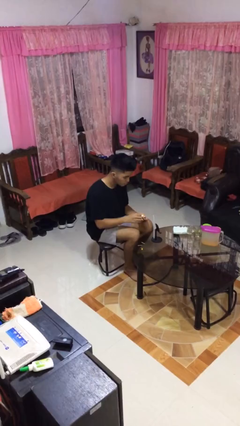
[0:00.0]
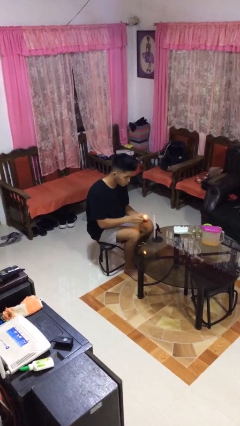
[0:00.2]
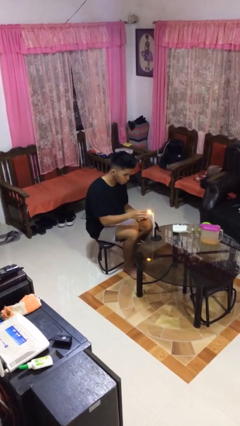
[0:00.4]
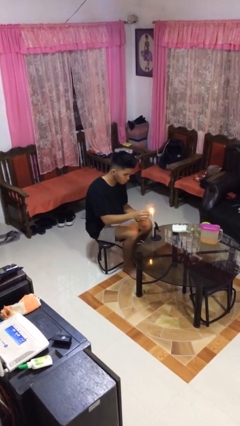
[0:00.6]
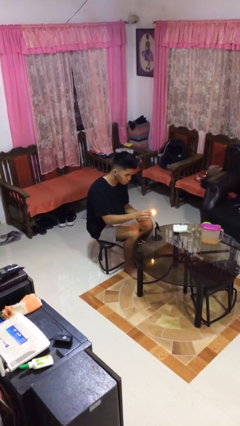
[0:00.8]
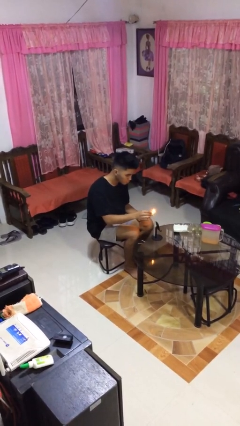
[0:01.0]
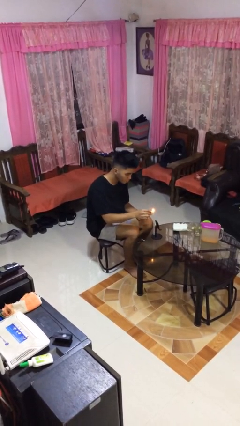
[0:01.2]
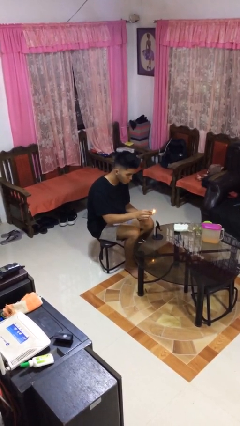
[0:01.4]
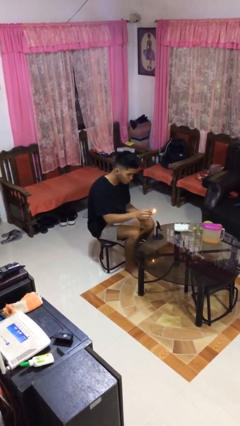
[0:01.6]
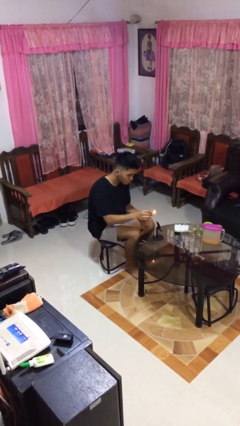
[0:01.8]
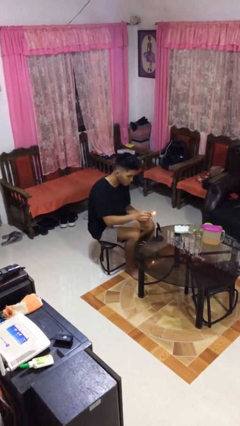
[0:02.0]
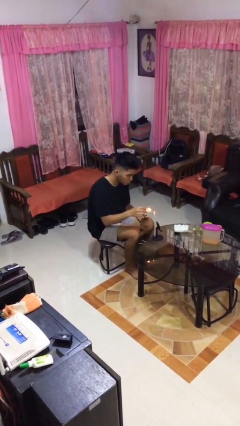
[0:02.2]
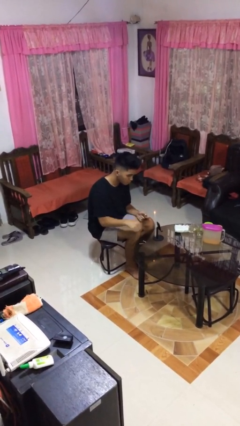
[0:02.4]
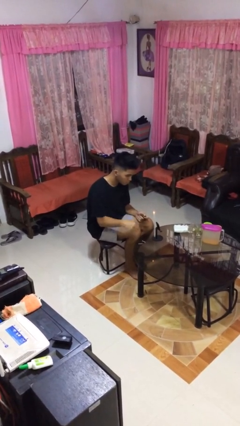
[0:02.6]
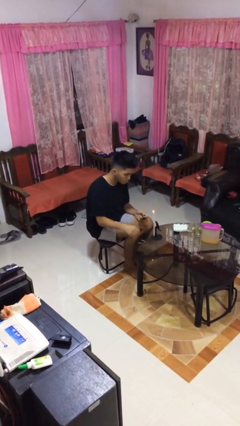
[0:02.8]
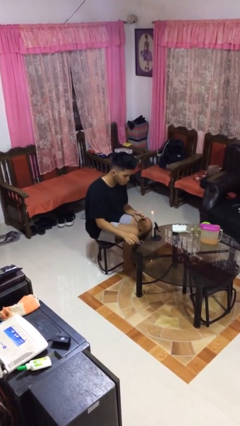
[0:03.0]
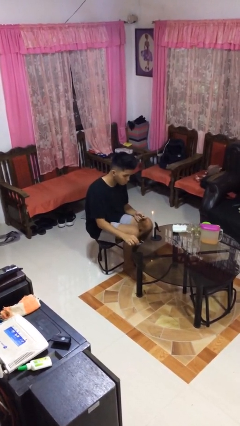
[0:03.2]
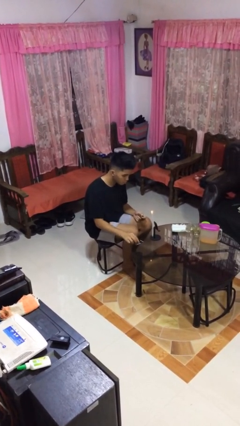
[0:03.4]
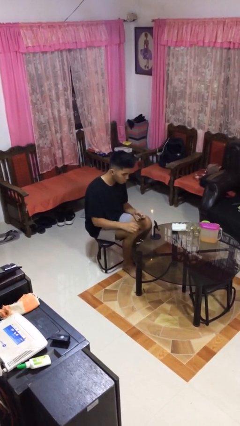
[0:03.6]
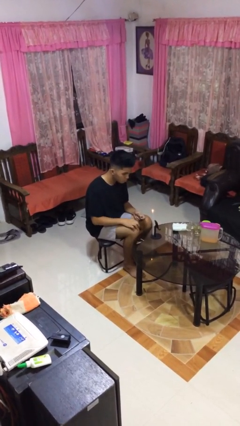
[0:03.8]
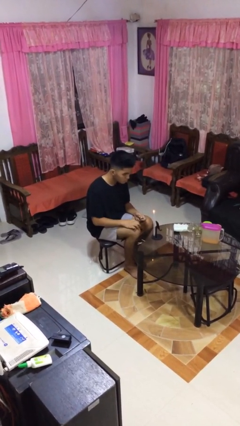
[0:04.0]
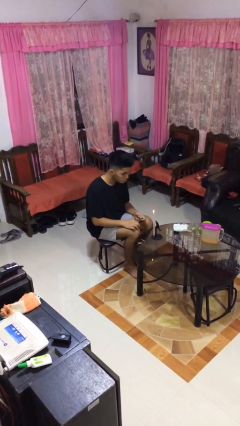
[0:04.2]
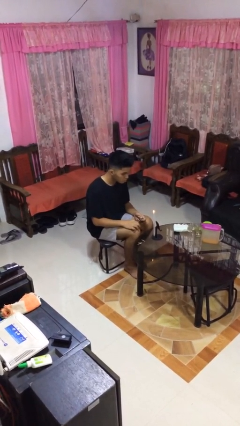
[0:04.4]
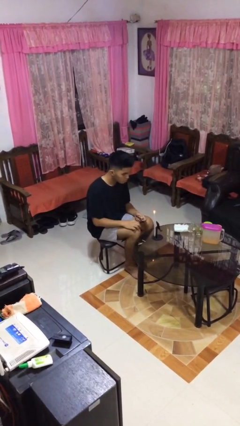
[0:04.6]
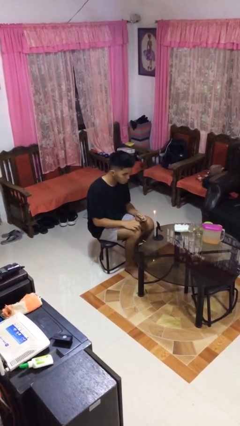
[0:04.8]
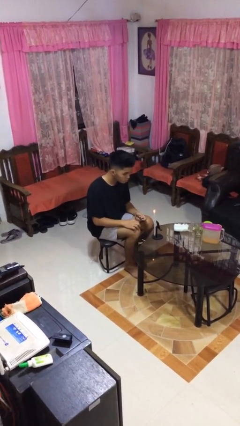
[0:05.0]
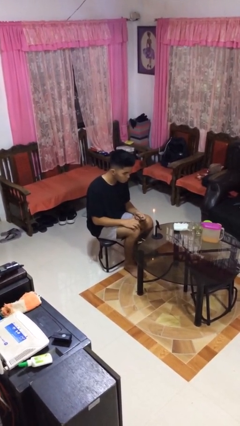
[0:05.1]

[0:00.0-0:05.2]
person lights candle

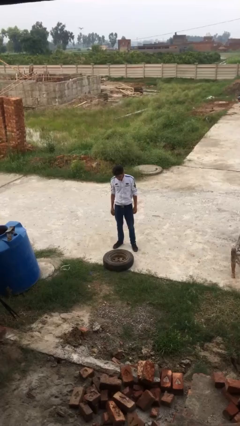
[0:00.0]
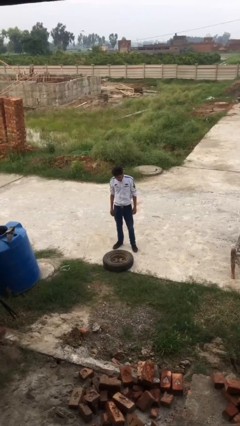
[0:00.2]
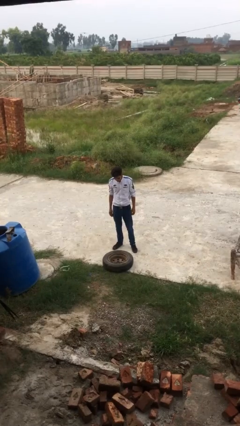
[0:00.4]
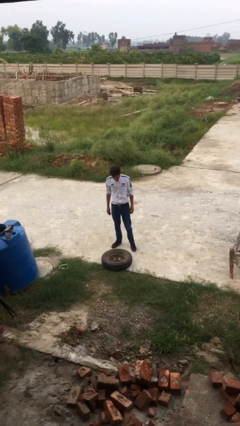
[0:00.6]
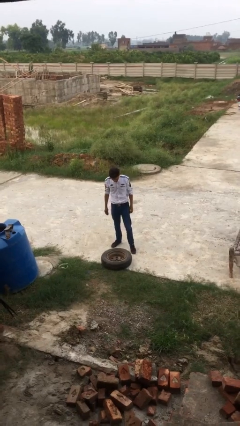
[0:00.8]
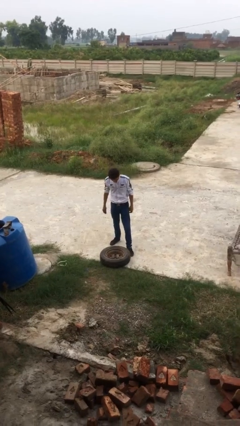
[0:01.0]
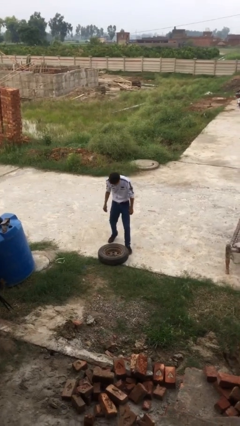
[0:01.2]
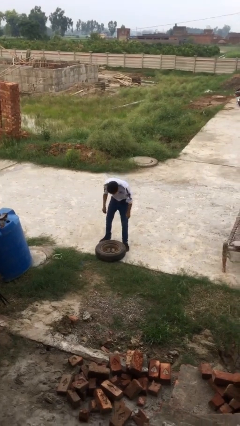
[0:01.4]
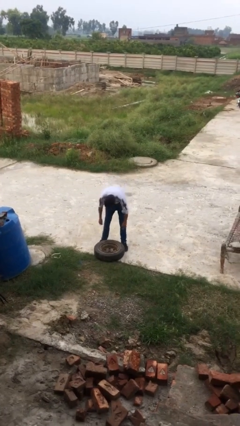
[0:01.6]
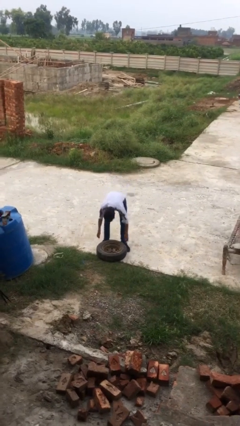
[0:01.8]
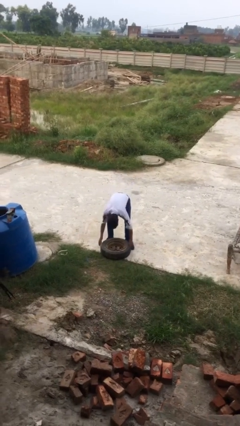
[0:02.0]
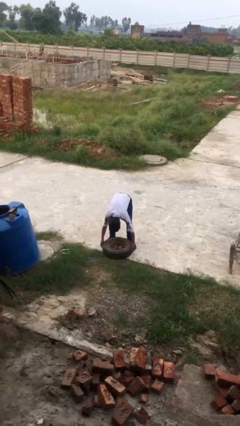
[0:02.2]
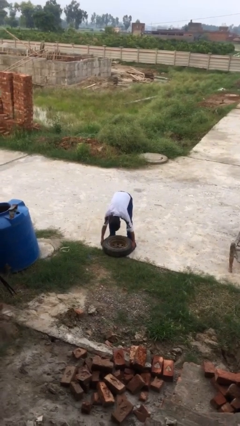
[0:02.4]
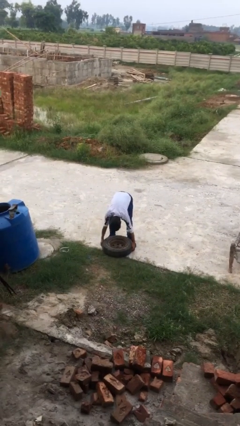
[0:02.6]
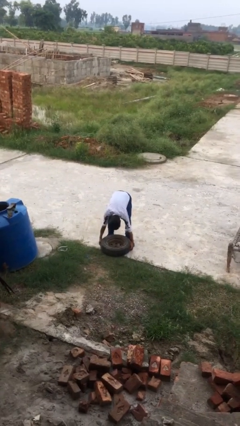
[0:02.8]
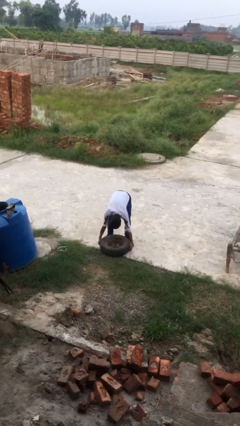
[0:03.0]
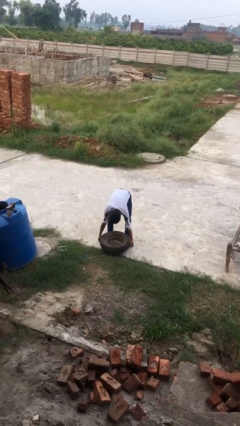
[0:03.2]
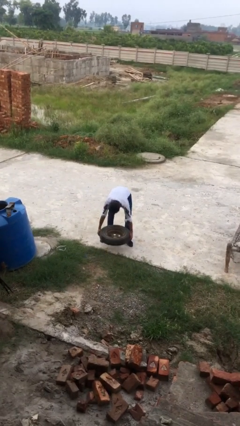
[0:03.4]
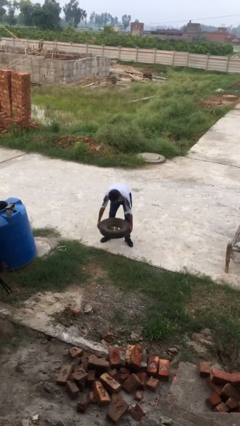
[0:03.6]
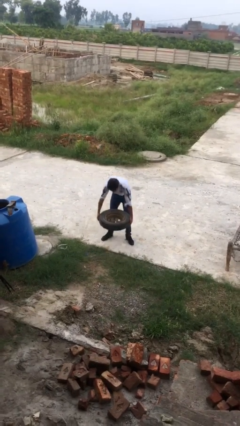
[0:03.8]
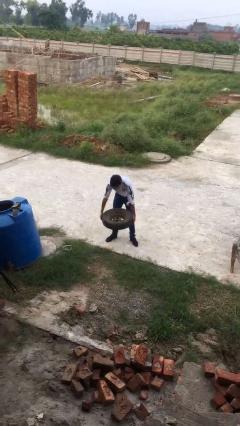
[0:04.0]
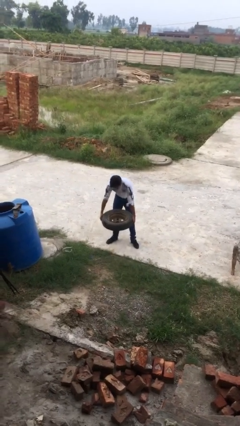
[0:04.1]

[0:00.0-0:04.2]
person picks up object from floor

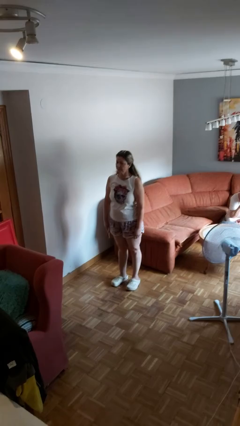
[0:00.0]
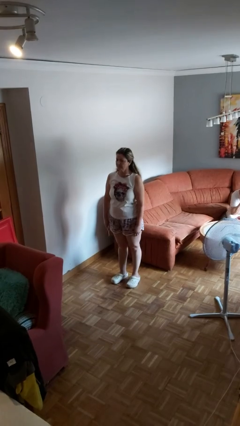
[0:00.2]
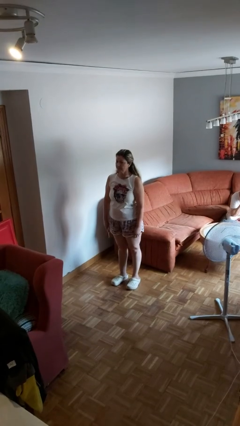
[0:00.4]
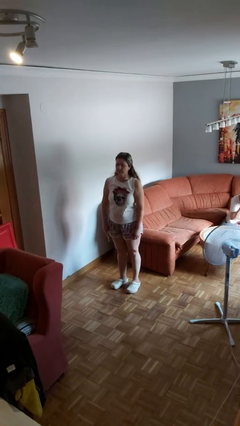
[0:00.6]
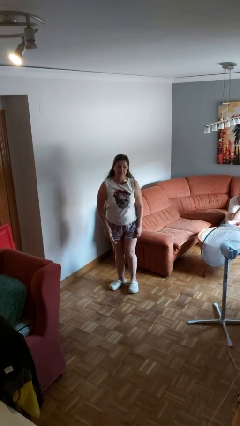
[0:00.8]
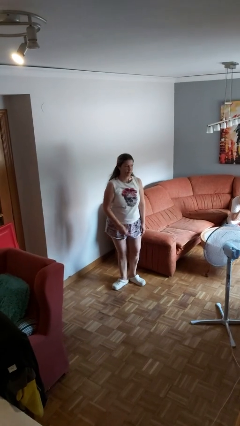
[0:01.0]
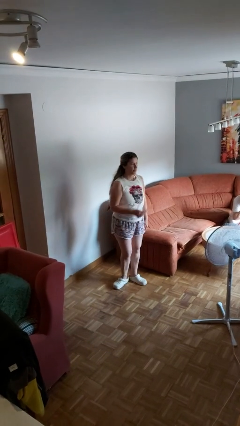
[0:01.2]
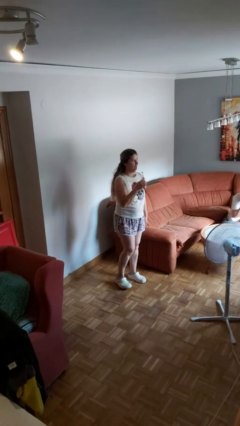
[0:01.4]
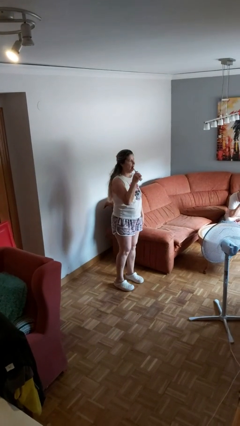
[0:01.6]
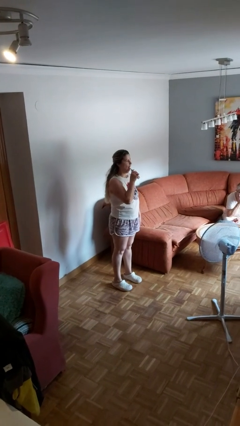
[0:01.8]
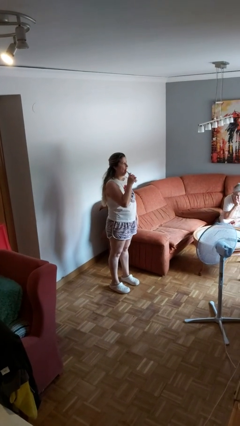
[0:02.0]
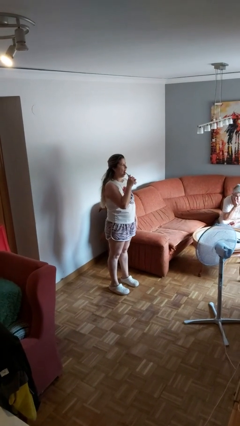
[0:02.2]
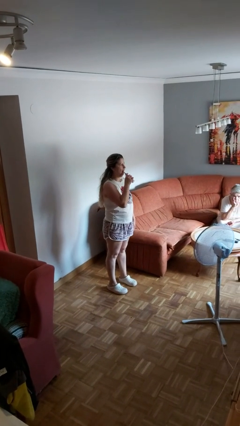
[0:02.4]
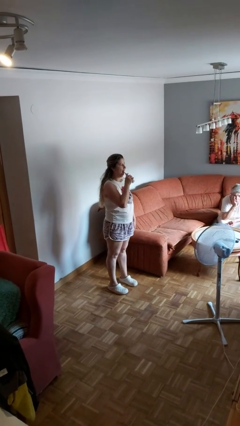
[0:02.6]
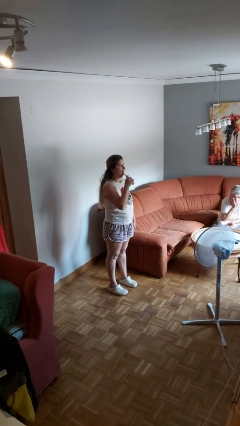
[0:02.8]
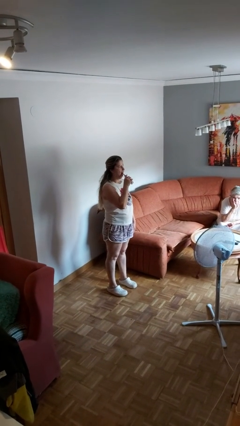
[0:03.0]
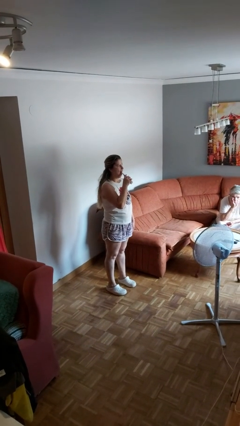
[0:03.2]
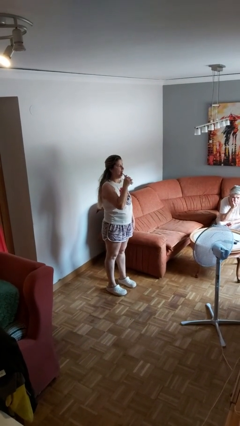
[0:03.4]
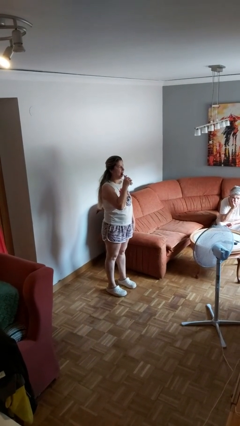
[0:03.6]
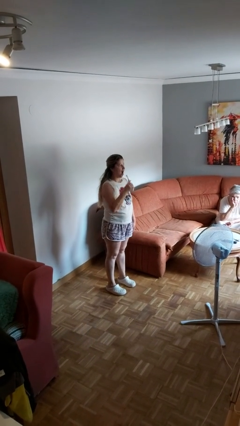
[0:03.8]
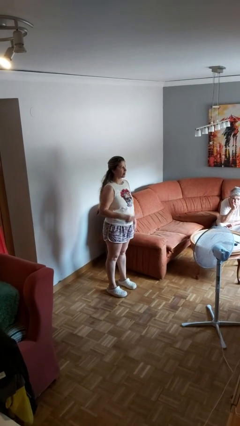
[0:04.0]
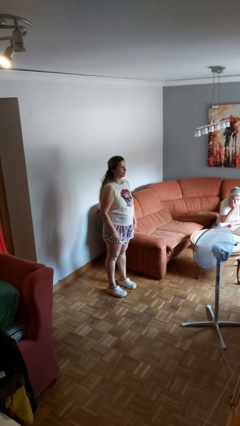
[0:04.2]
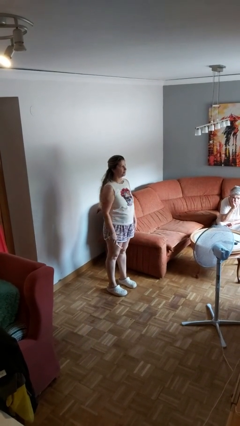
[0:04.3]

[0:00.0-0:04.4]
person brushes teeth

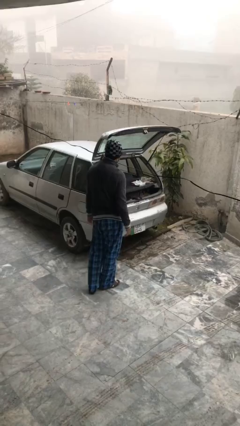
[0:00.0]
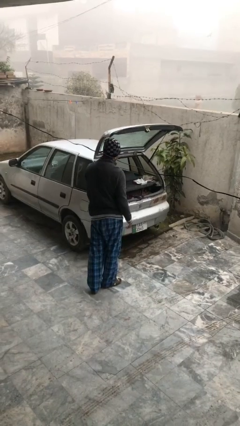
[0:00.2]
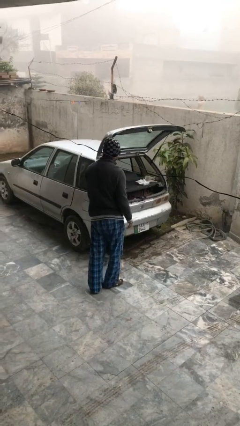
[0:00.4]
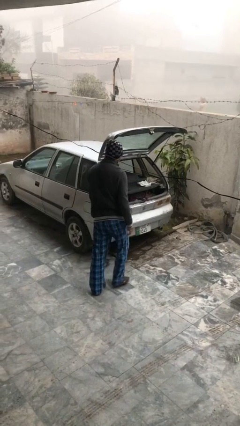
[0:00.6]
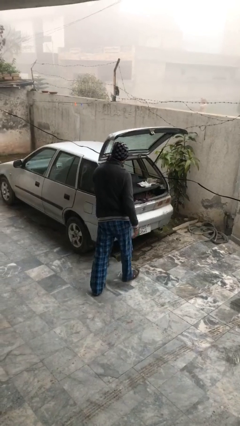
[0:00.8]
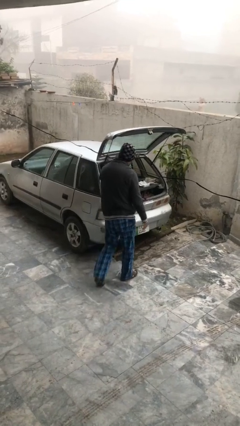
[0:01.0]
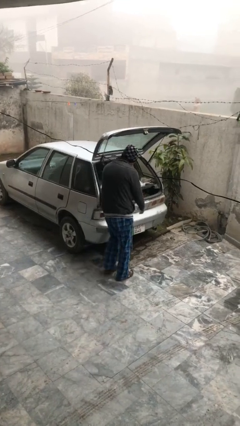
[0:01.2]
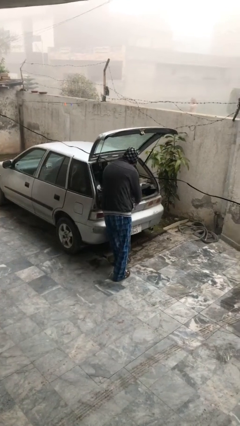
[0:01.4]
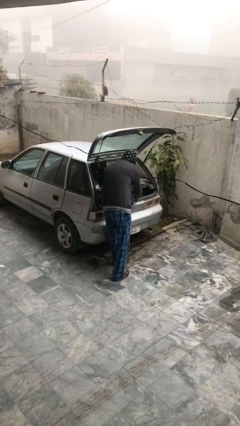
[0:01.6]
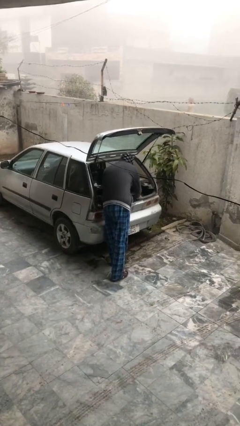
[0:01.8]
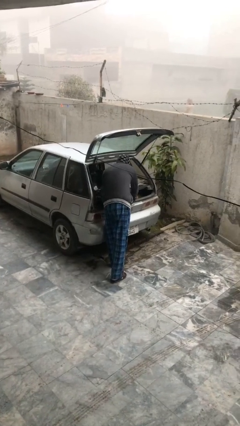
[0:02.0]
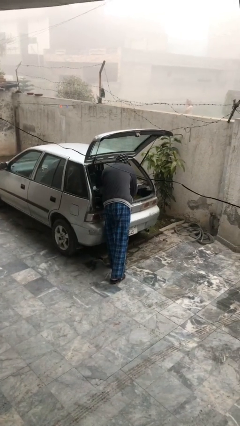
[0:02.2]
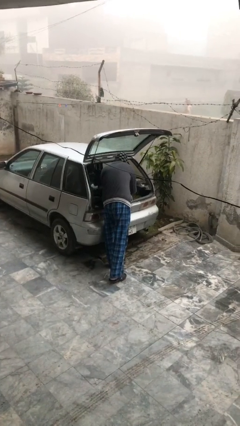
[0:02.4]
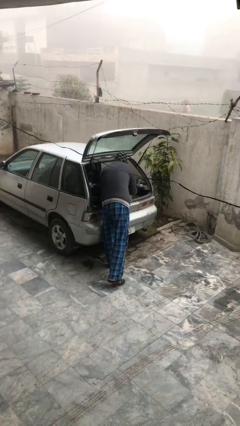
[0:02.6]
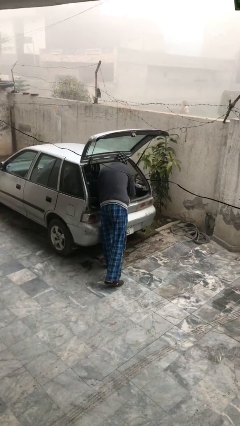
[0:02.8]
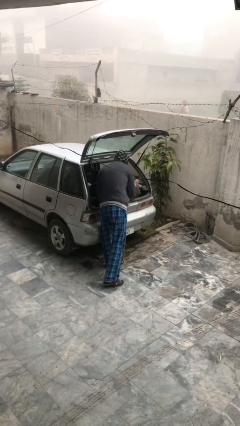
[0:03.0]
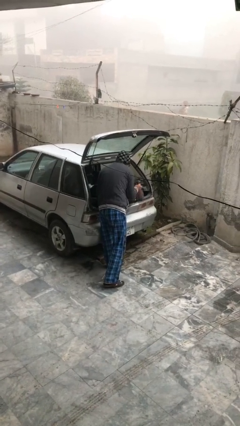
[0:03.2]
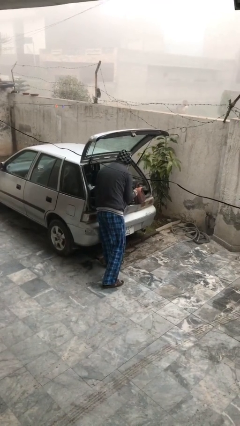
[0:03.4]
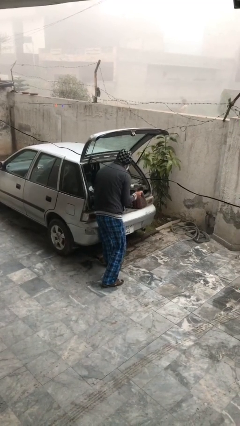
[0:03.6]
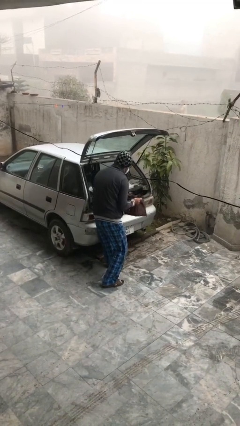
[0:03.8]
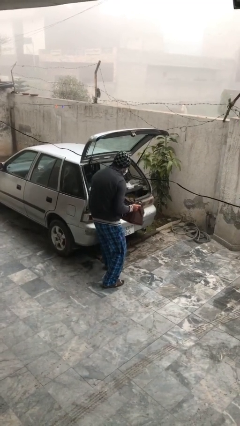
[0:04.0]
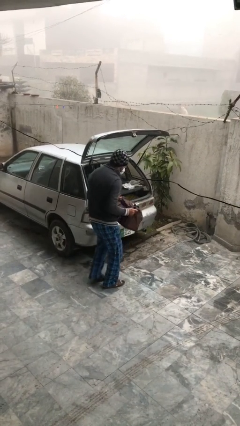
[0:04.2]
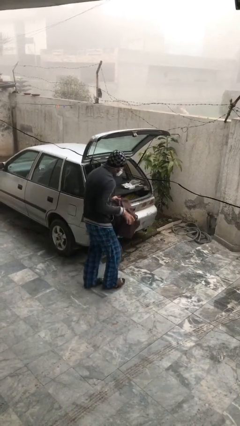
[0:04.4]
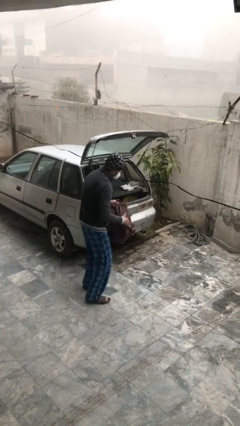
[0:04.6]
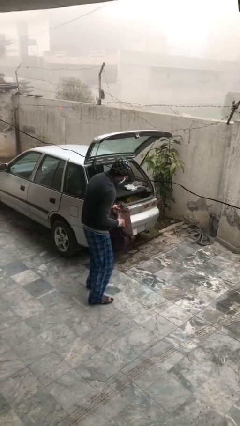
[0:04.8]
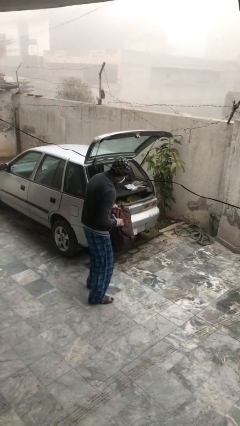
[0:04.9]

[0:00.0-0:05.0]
person unloads car
